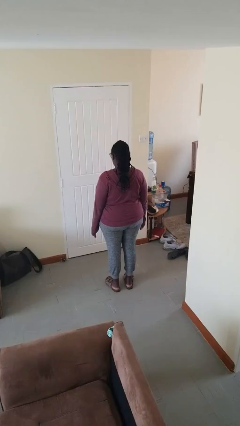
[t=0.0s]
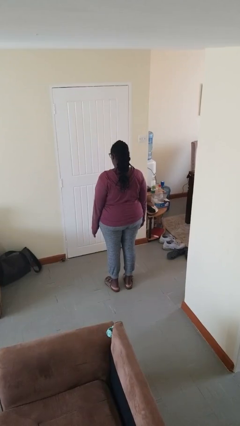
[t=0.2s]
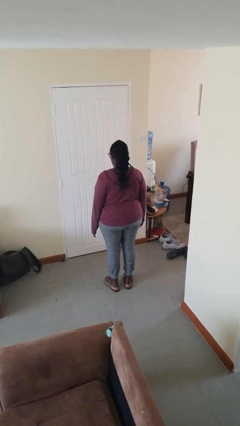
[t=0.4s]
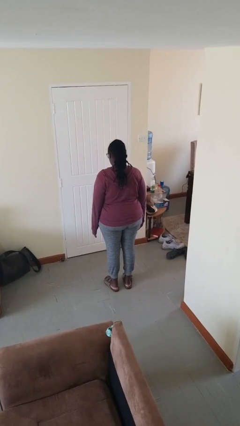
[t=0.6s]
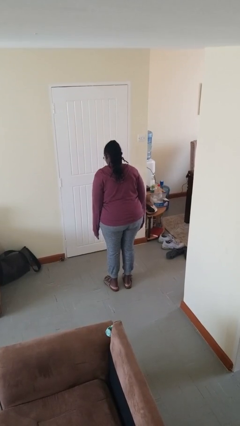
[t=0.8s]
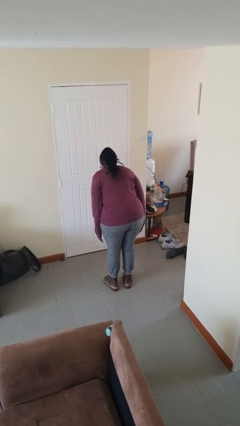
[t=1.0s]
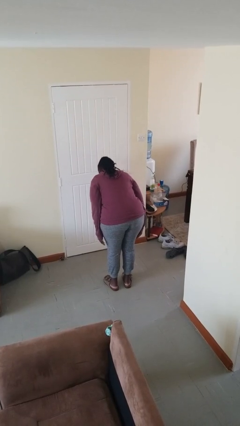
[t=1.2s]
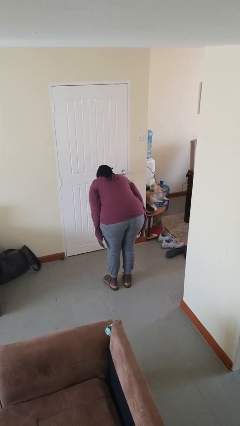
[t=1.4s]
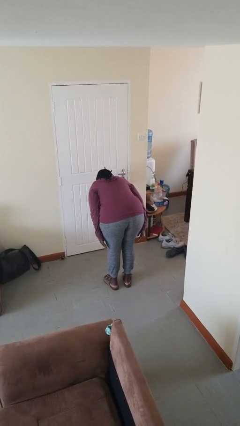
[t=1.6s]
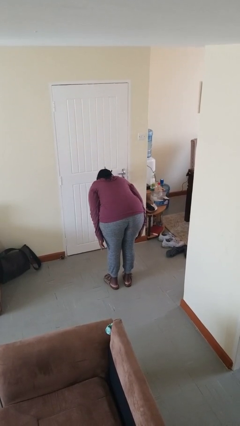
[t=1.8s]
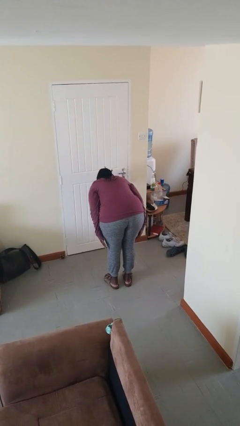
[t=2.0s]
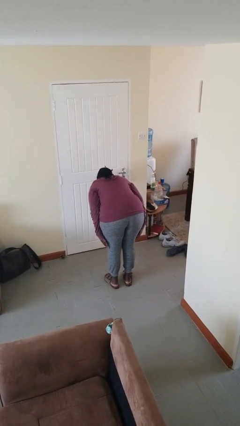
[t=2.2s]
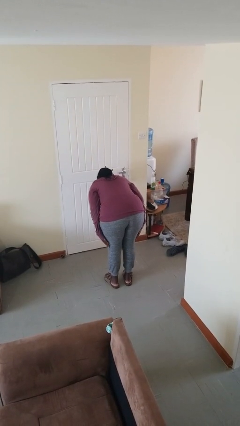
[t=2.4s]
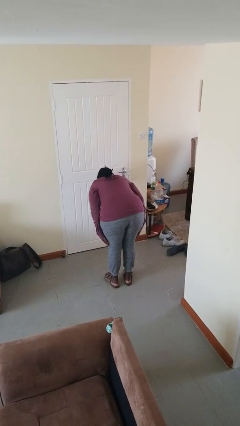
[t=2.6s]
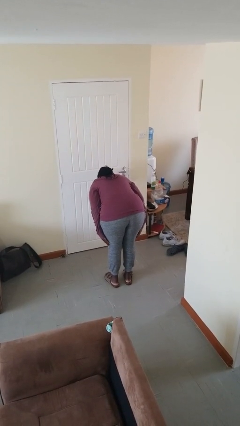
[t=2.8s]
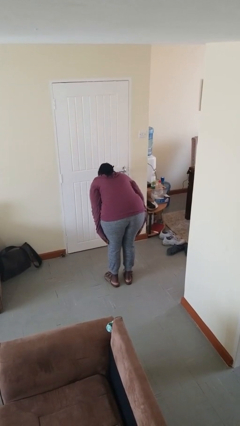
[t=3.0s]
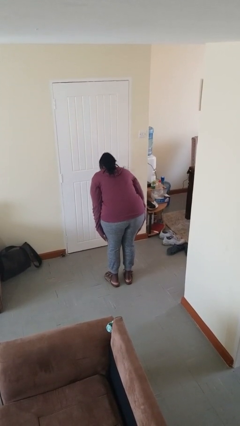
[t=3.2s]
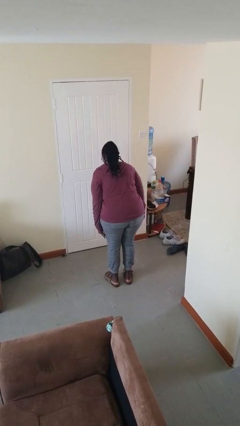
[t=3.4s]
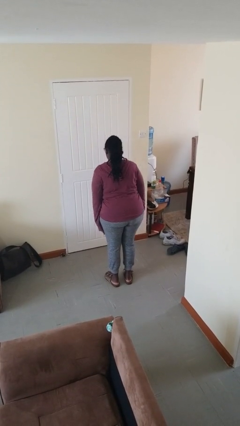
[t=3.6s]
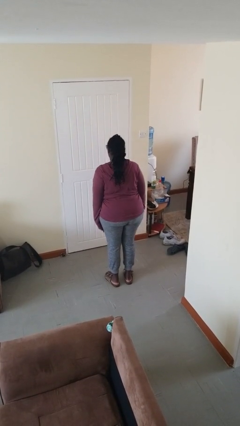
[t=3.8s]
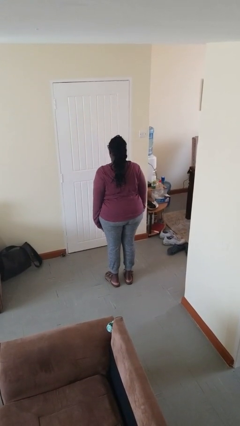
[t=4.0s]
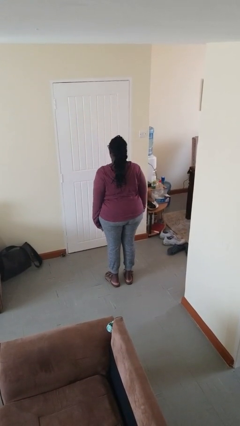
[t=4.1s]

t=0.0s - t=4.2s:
person bows

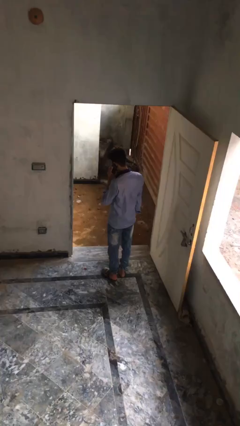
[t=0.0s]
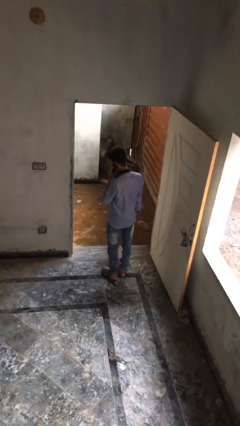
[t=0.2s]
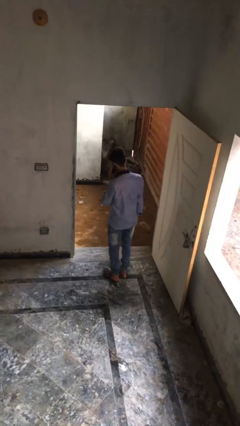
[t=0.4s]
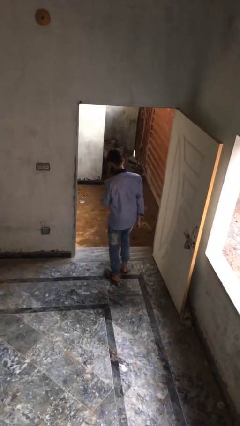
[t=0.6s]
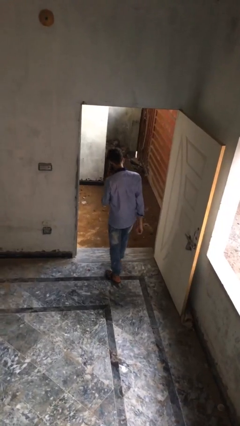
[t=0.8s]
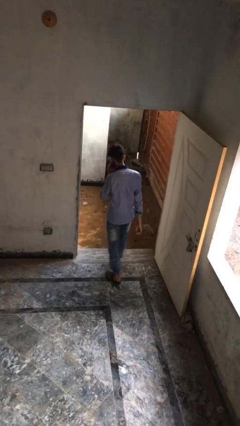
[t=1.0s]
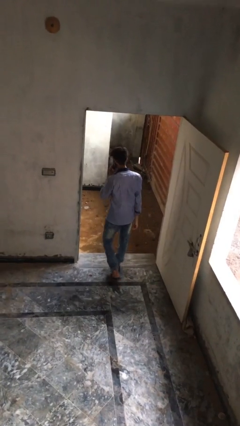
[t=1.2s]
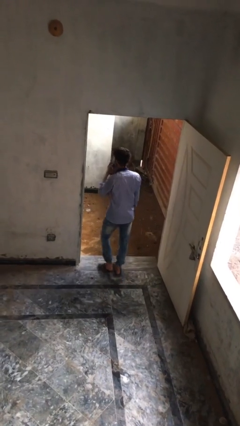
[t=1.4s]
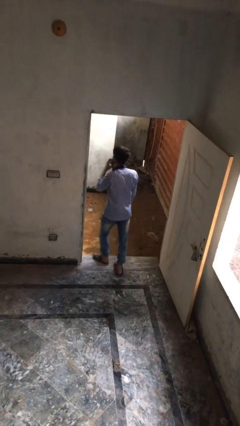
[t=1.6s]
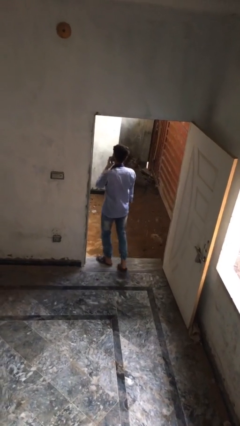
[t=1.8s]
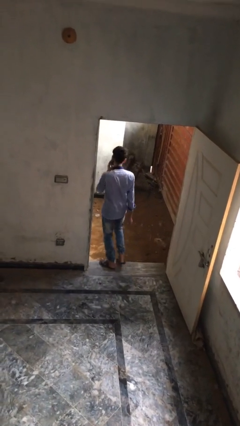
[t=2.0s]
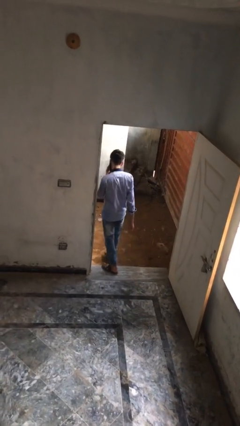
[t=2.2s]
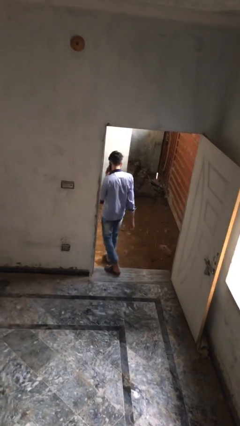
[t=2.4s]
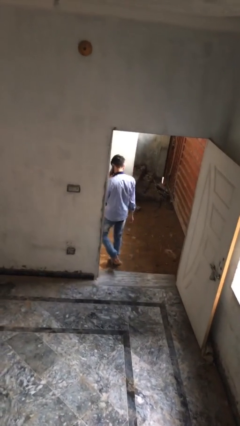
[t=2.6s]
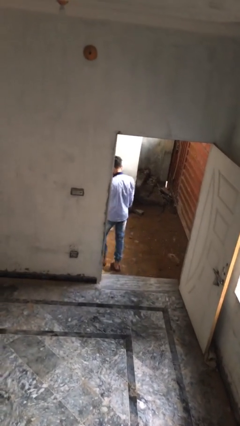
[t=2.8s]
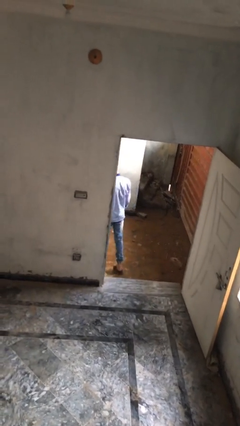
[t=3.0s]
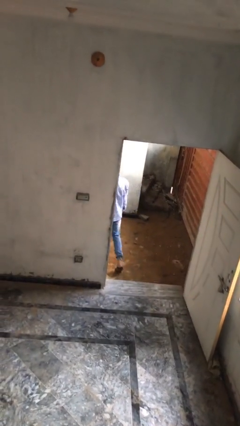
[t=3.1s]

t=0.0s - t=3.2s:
person exits scene through structure

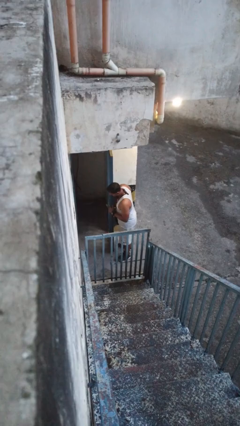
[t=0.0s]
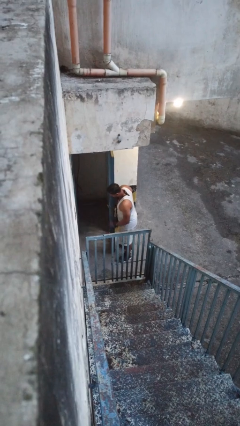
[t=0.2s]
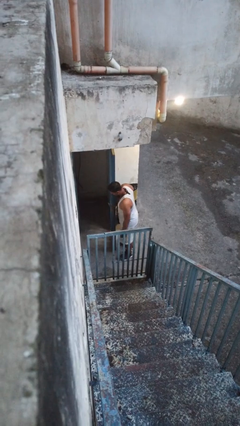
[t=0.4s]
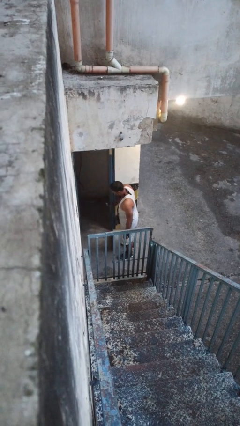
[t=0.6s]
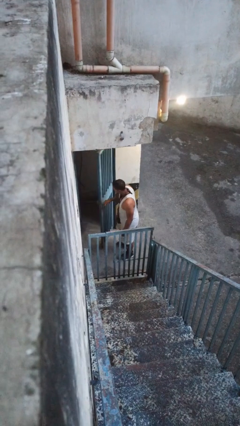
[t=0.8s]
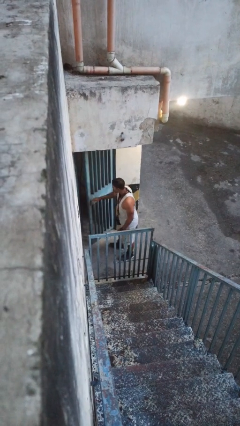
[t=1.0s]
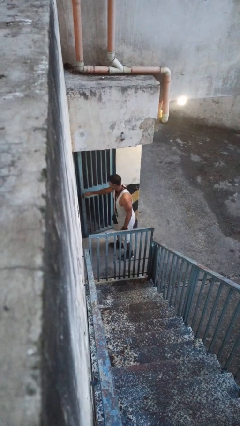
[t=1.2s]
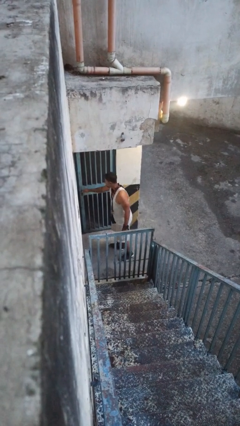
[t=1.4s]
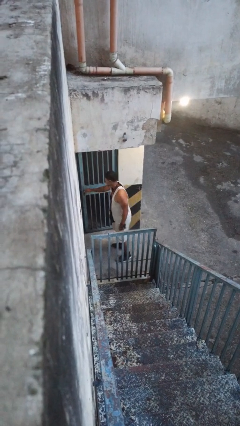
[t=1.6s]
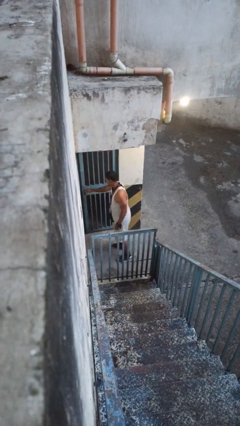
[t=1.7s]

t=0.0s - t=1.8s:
person closes facility door

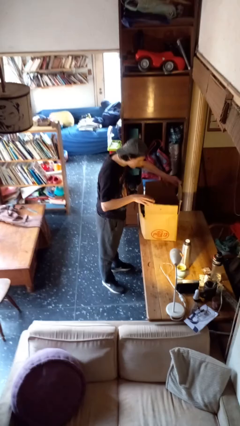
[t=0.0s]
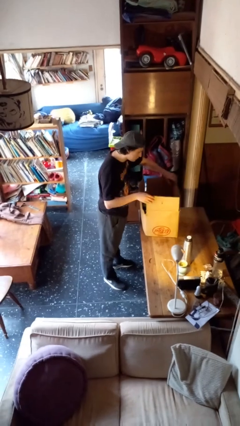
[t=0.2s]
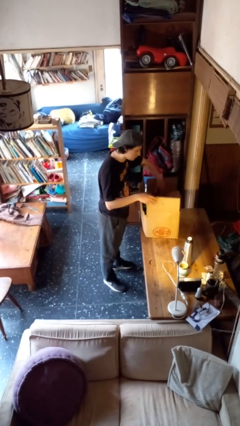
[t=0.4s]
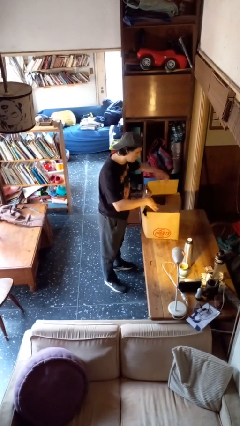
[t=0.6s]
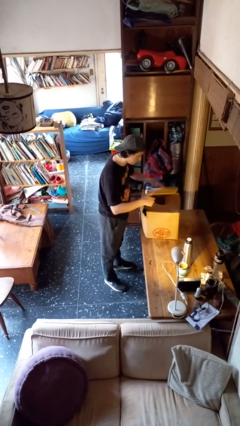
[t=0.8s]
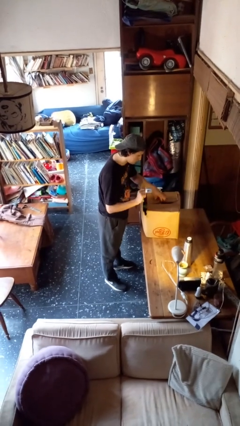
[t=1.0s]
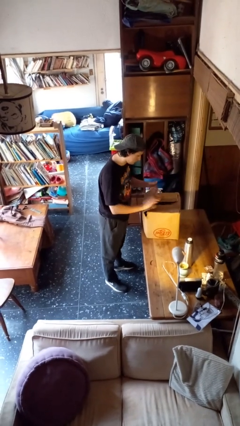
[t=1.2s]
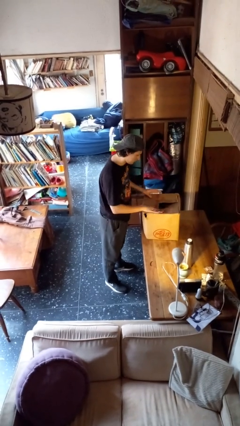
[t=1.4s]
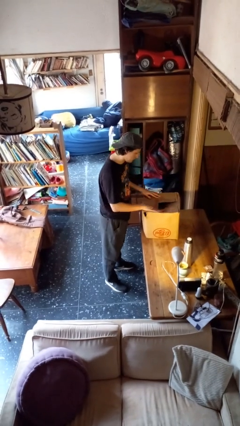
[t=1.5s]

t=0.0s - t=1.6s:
person closes box

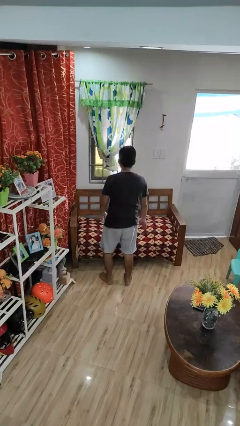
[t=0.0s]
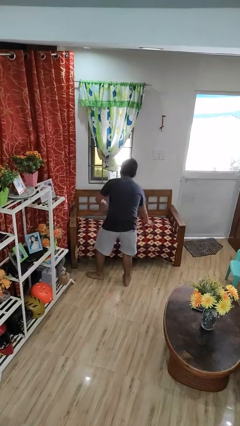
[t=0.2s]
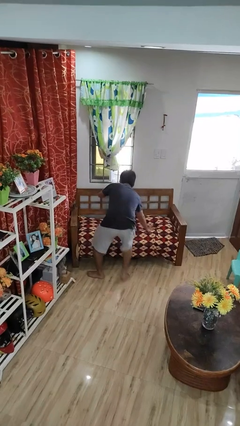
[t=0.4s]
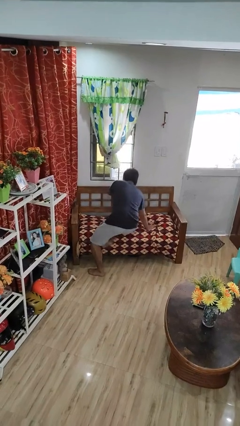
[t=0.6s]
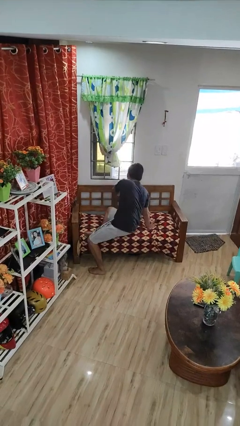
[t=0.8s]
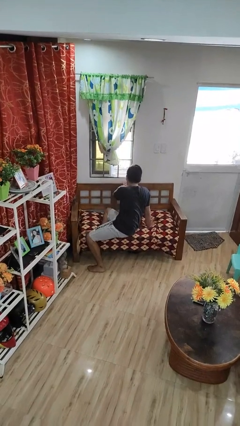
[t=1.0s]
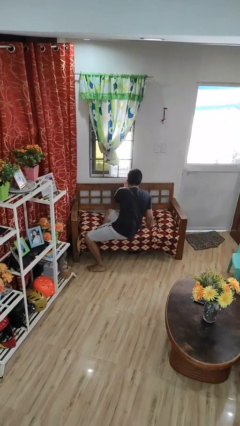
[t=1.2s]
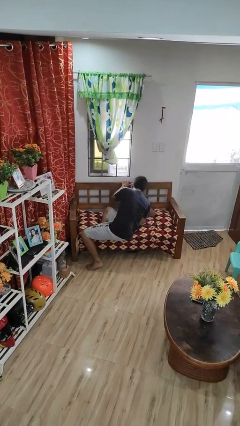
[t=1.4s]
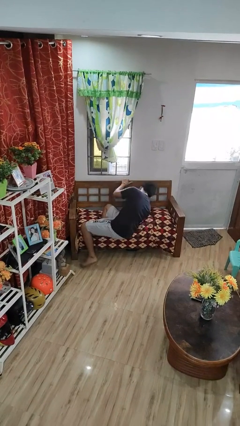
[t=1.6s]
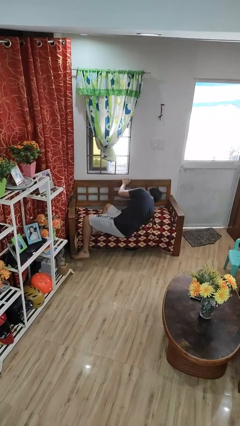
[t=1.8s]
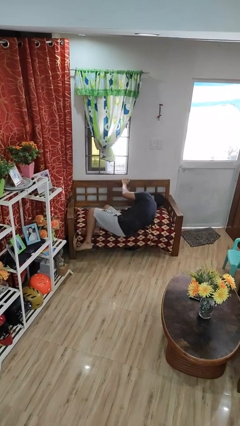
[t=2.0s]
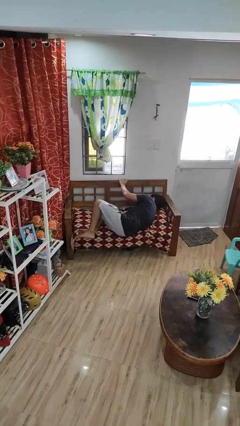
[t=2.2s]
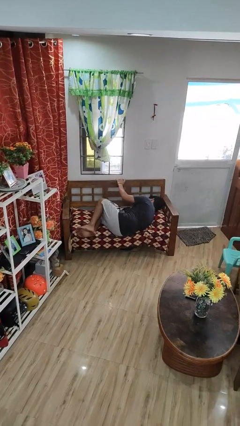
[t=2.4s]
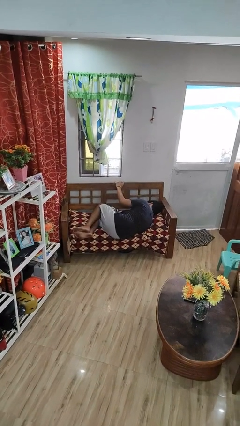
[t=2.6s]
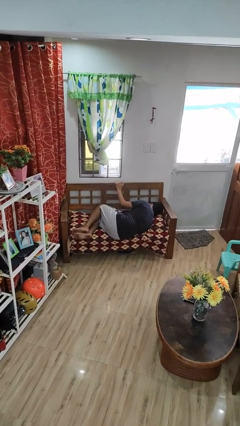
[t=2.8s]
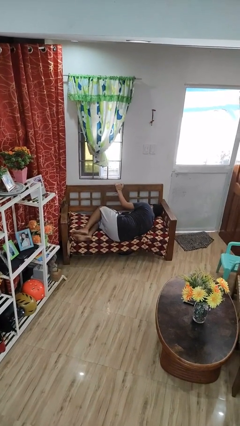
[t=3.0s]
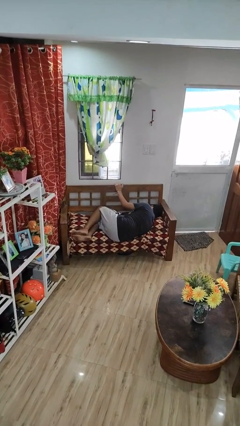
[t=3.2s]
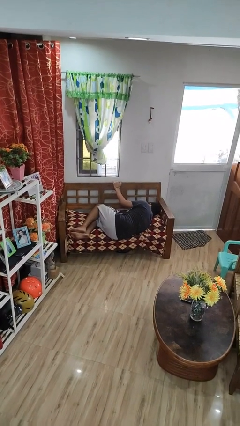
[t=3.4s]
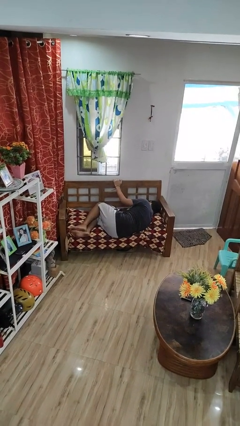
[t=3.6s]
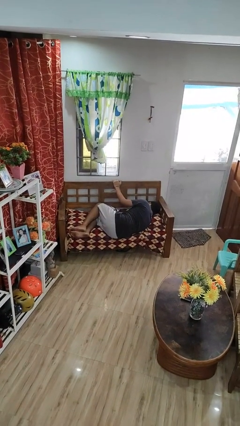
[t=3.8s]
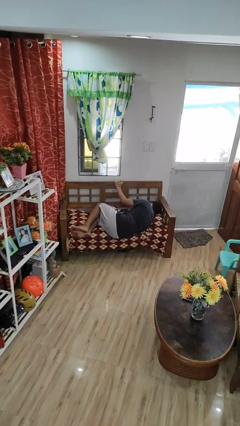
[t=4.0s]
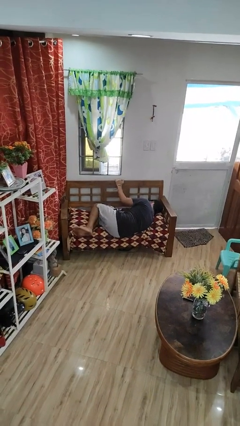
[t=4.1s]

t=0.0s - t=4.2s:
person lies down on couch

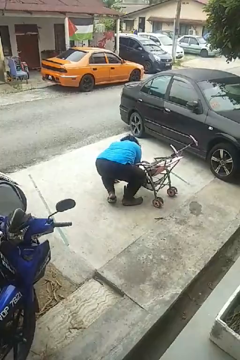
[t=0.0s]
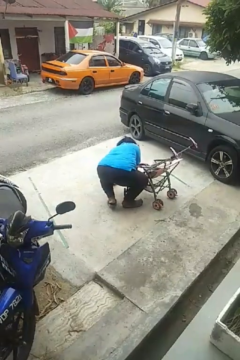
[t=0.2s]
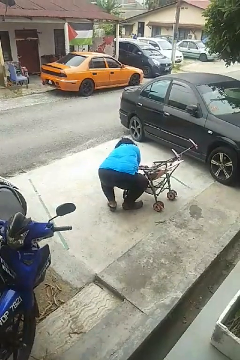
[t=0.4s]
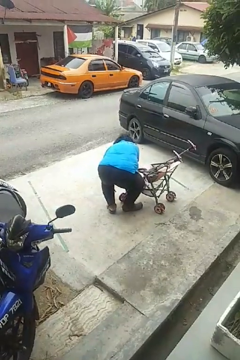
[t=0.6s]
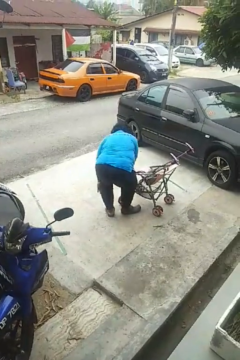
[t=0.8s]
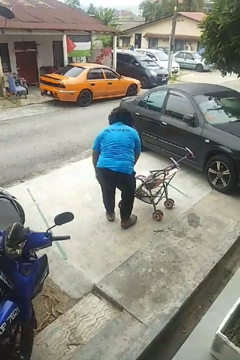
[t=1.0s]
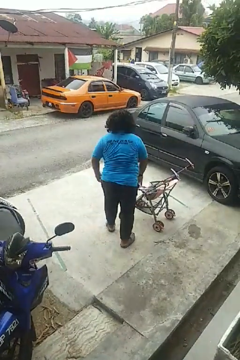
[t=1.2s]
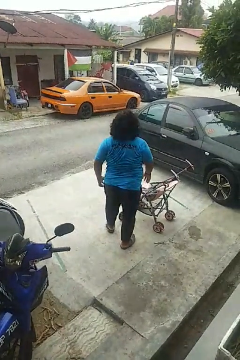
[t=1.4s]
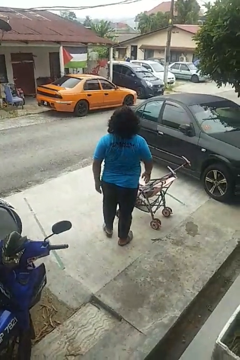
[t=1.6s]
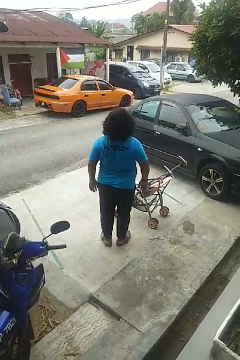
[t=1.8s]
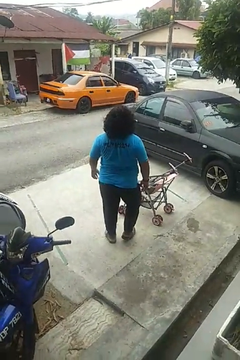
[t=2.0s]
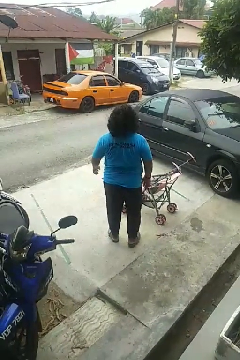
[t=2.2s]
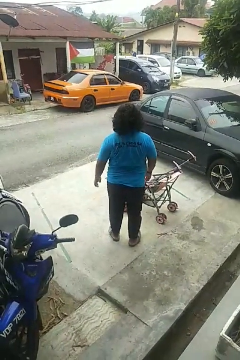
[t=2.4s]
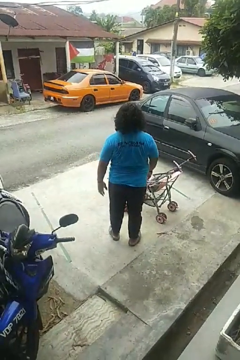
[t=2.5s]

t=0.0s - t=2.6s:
person stands up from floor
